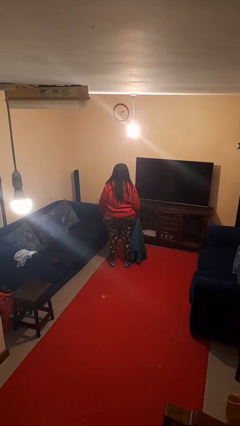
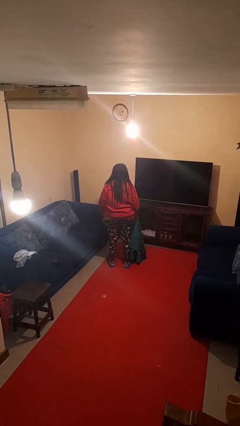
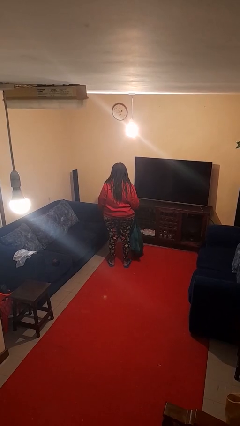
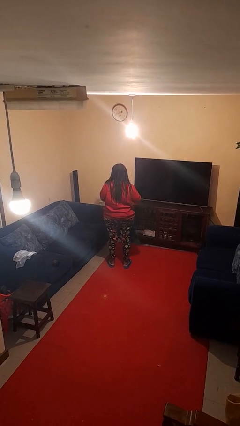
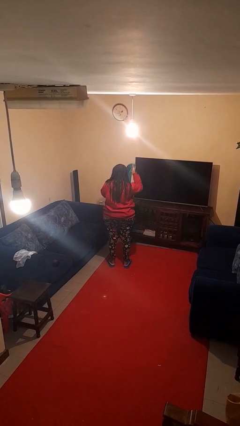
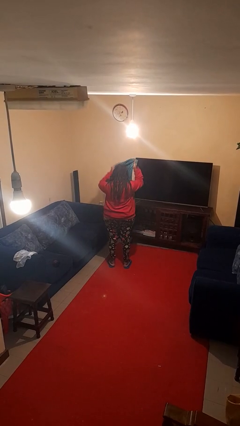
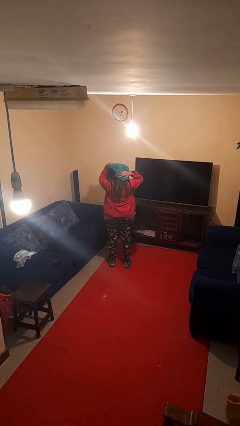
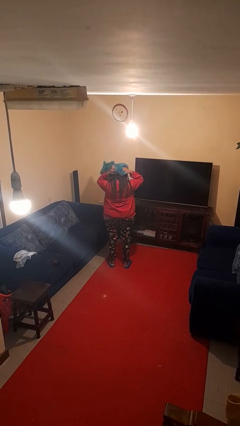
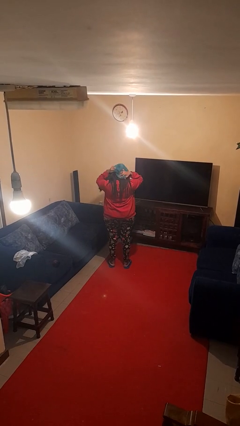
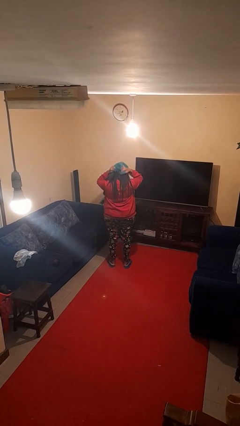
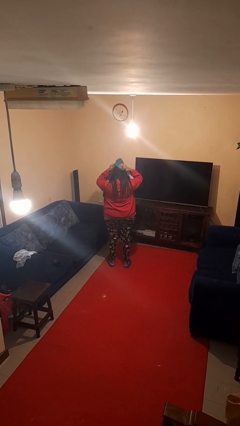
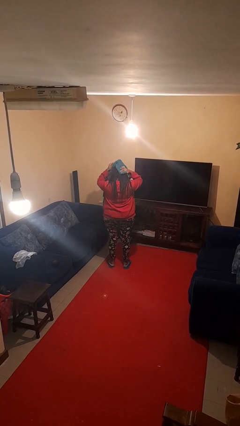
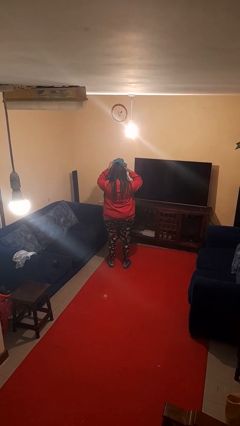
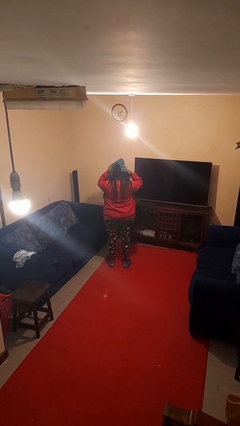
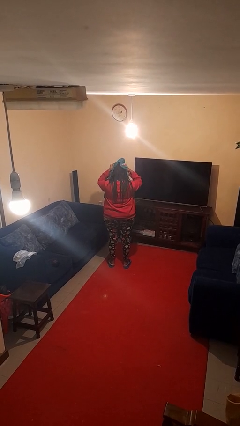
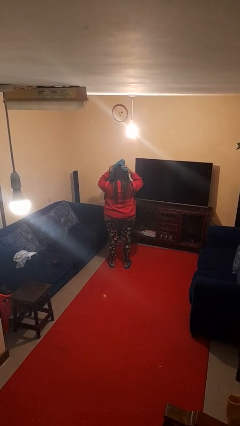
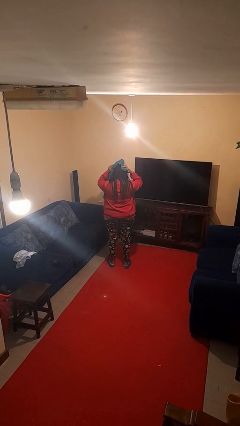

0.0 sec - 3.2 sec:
person dries hair with towel

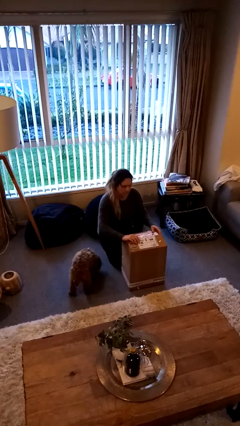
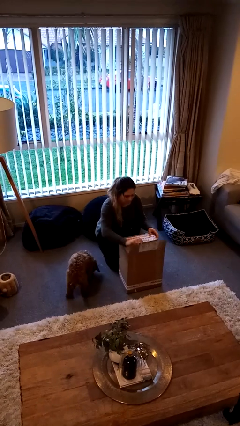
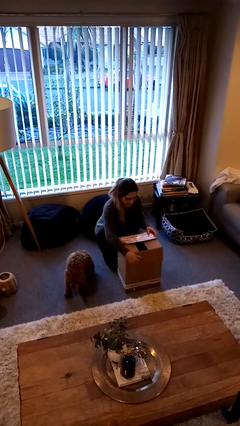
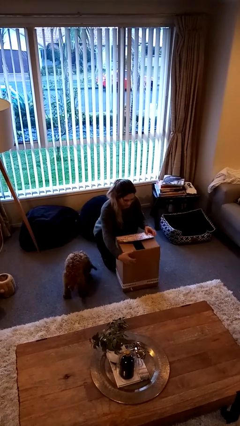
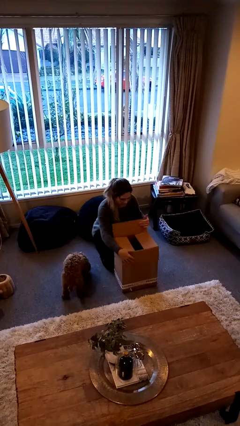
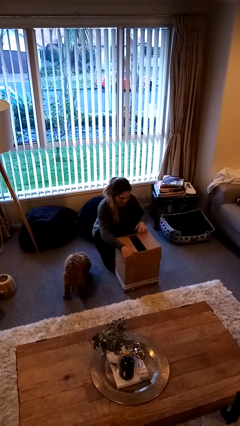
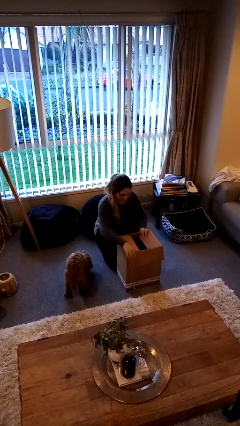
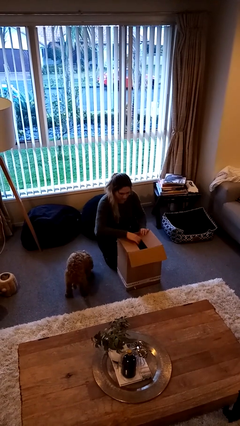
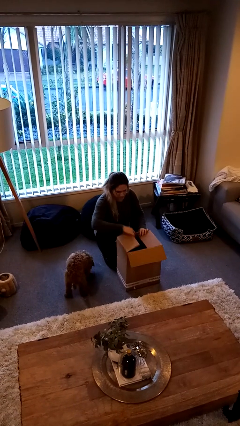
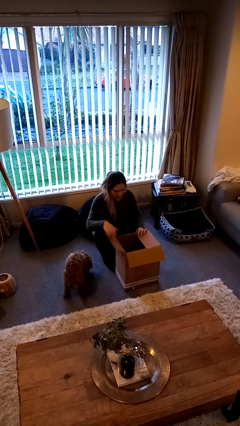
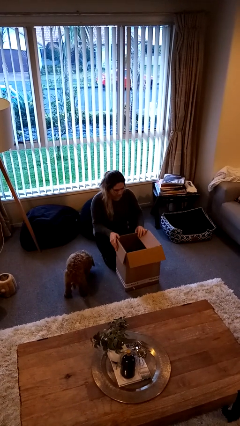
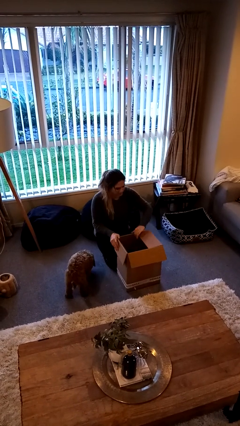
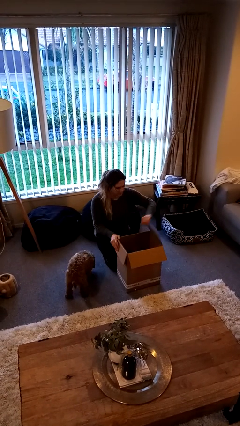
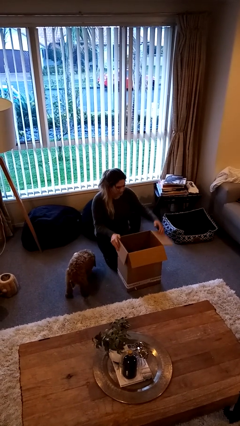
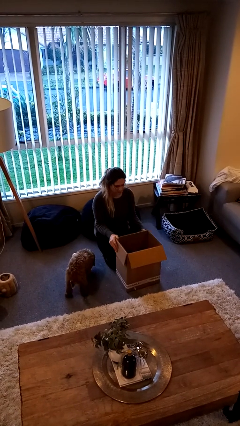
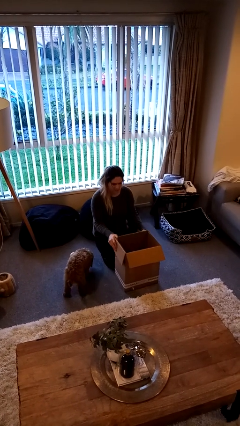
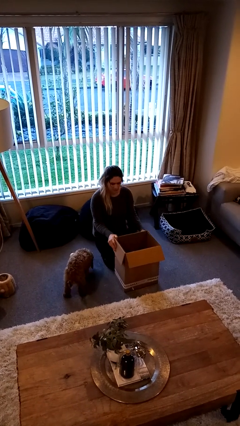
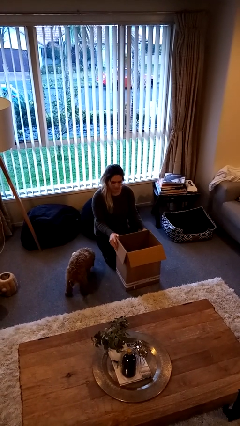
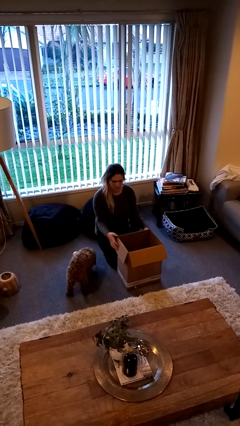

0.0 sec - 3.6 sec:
person opens box

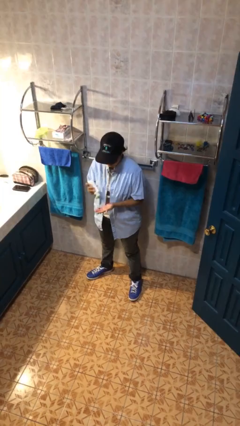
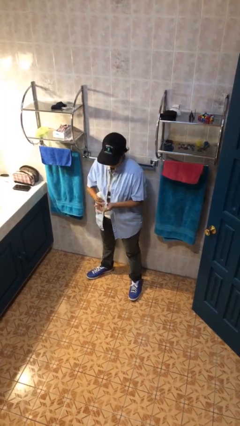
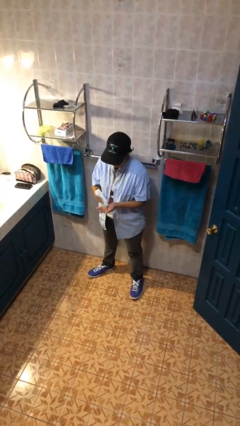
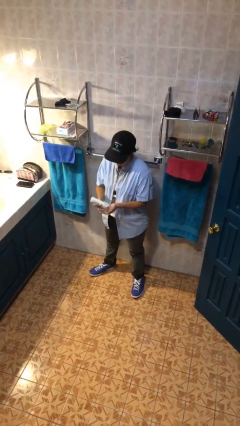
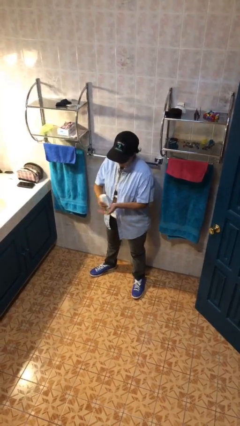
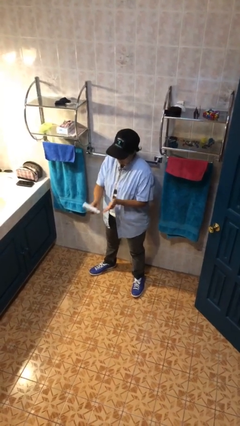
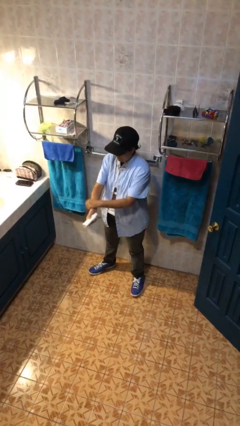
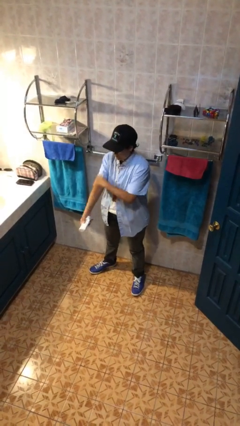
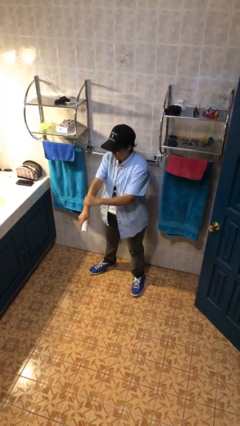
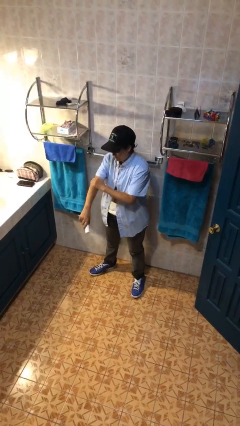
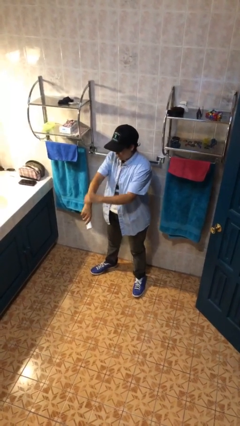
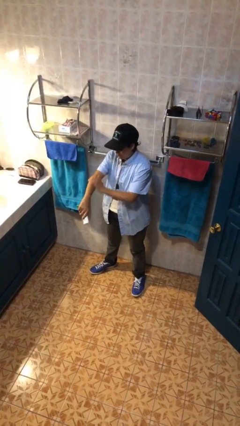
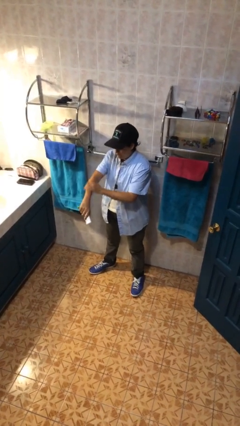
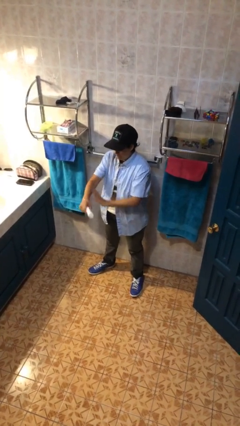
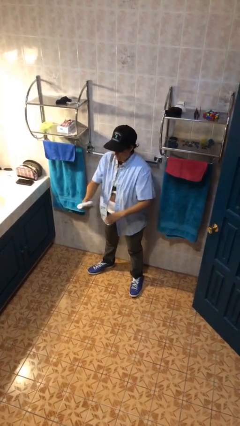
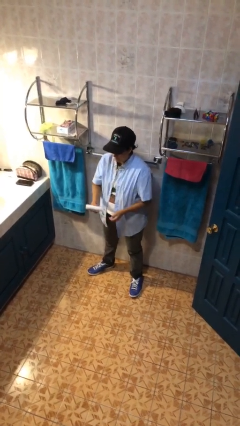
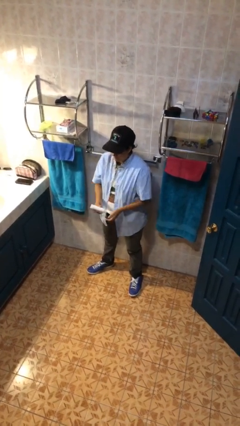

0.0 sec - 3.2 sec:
person applies sunscreen

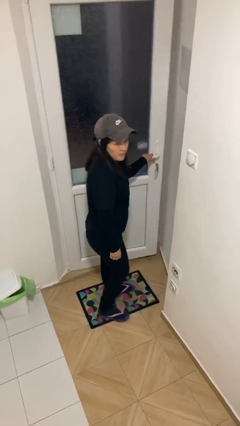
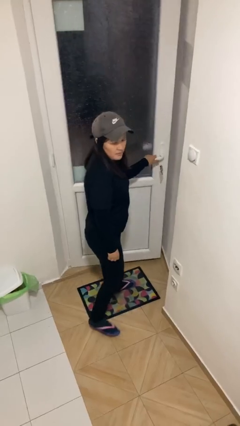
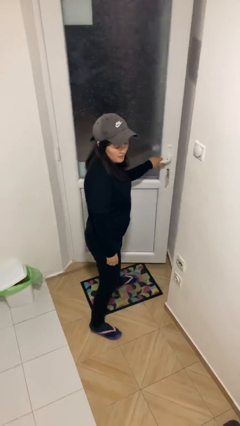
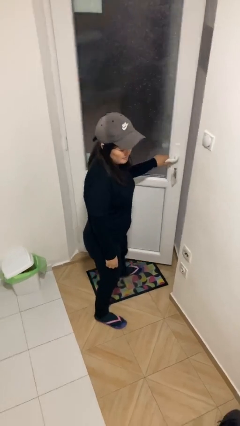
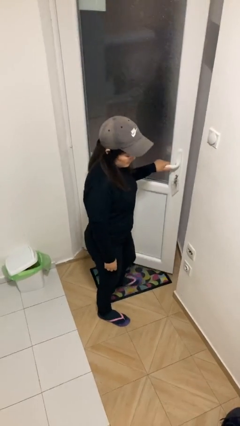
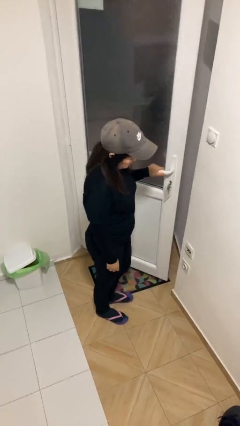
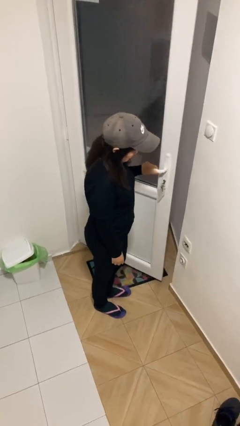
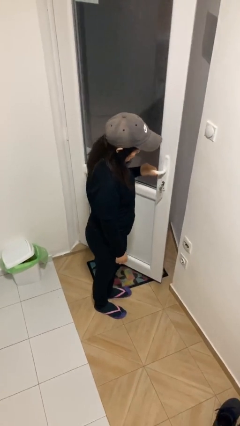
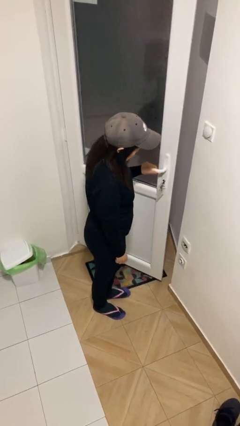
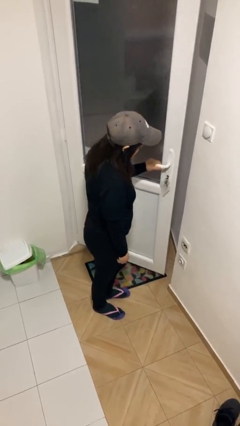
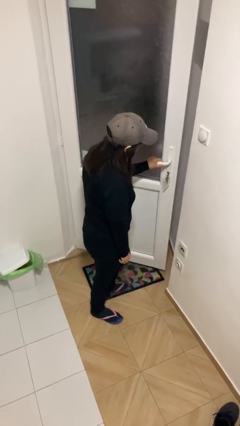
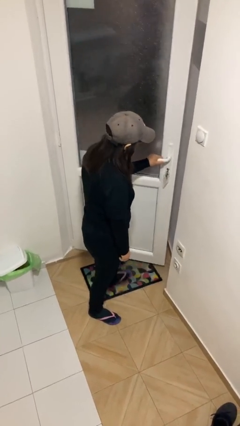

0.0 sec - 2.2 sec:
person opens facility door

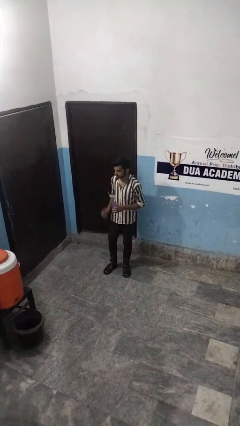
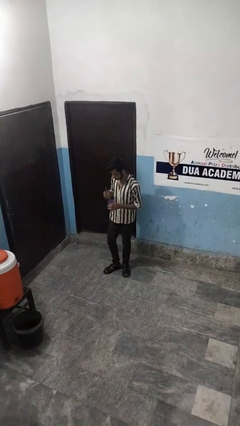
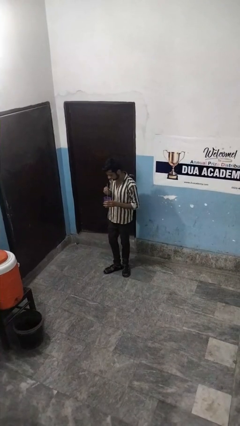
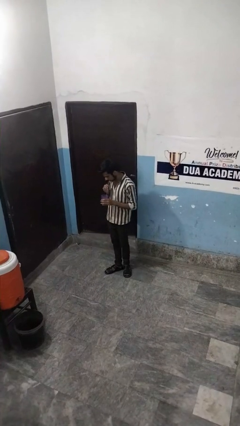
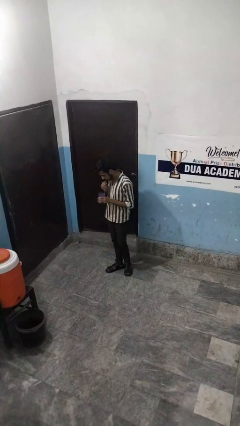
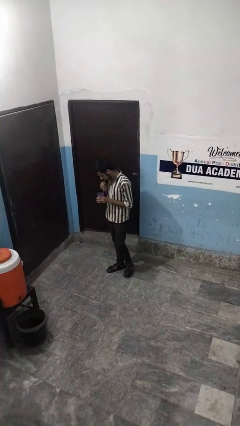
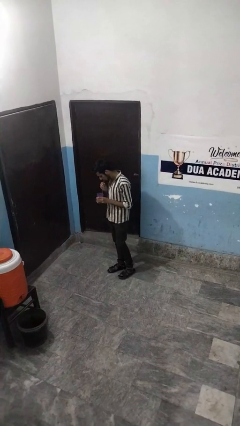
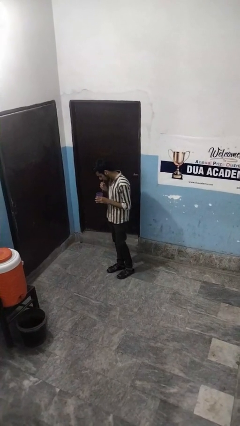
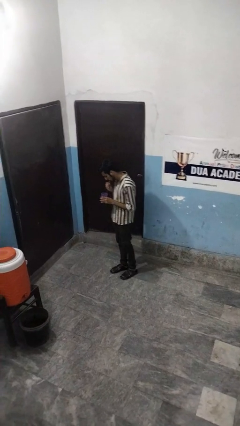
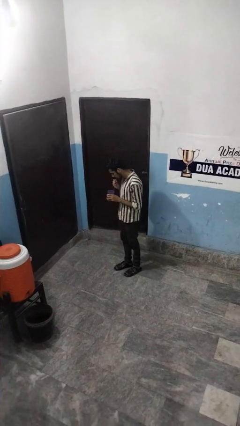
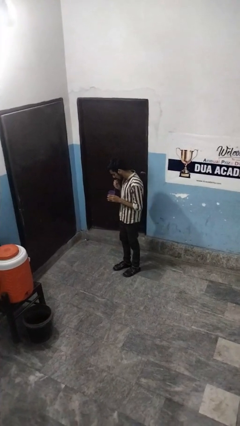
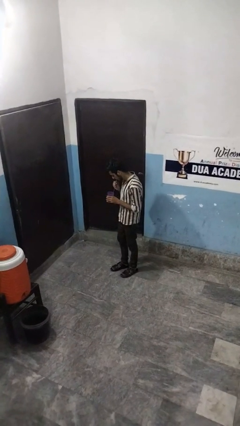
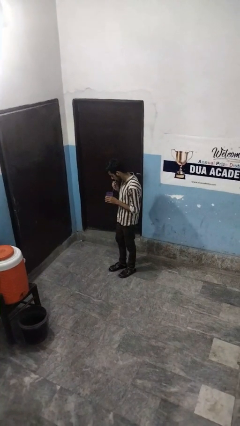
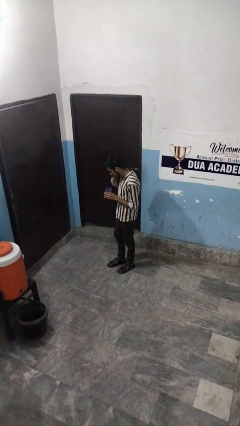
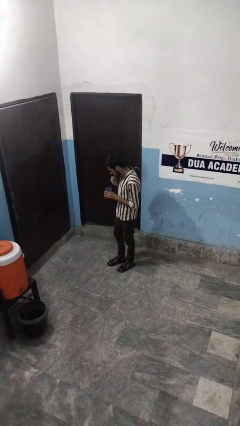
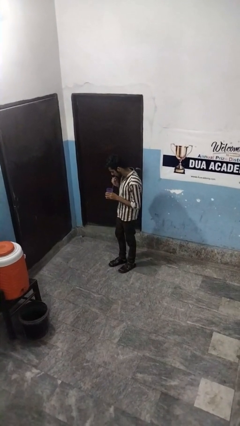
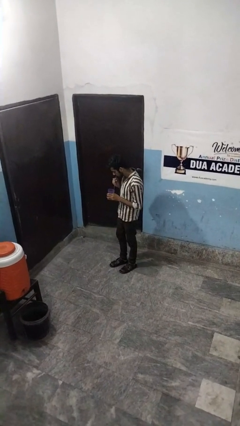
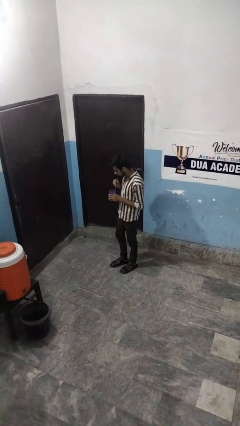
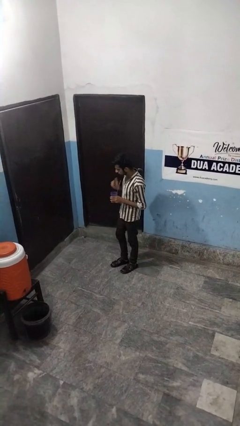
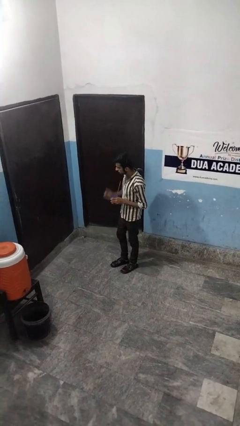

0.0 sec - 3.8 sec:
person drinks from straw

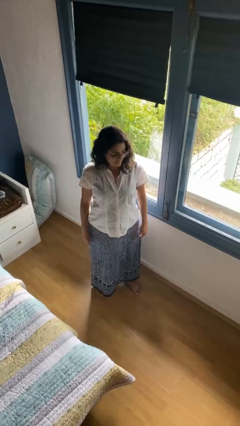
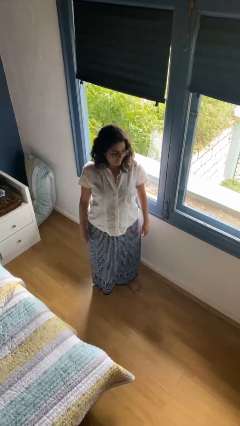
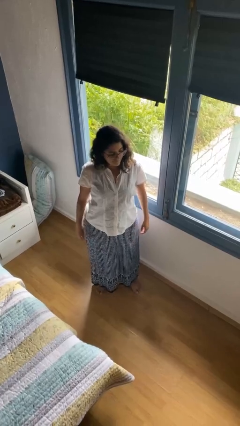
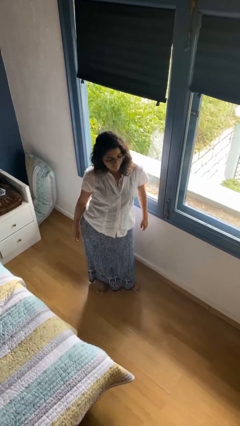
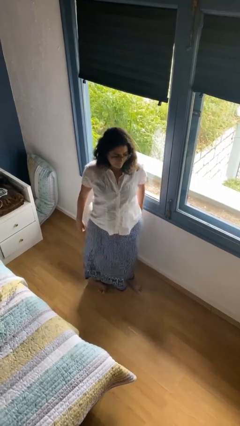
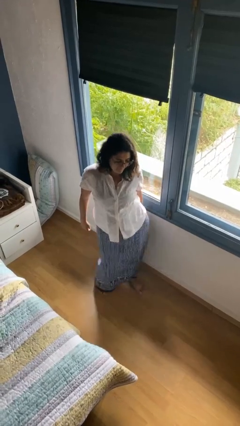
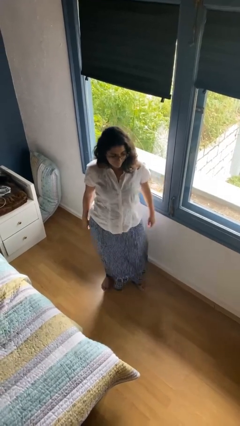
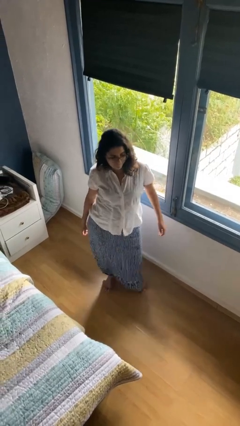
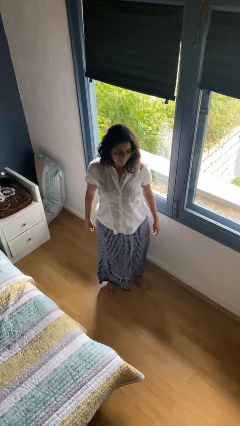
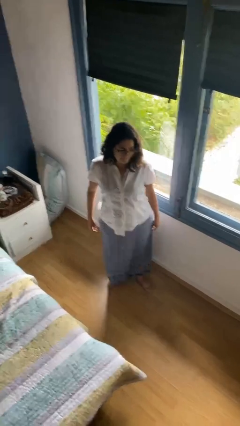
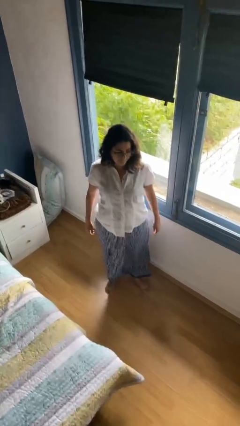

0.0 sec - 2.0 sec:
person wiggles hips
